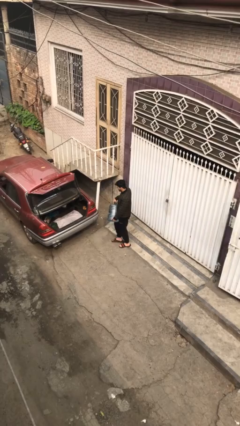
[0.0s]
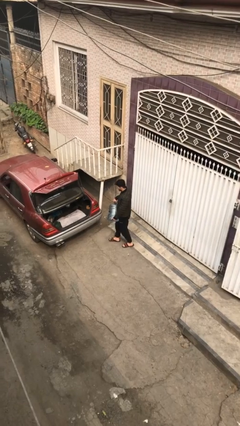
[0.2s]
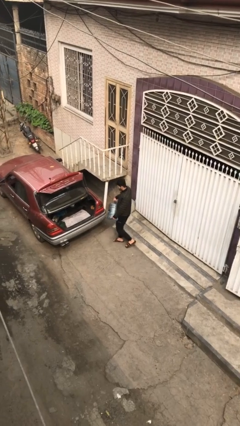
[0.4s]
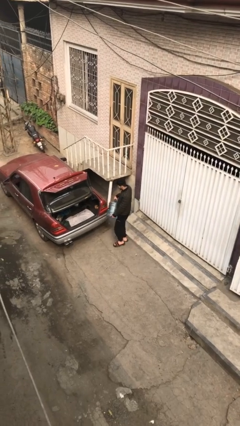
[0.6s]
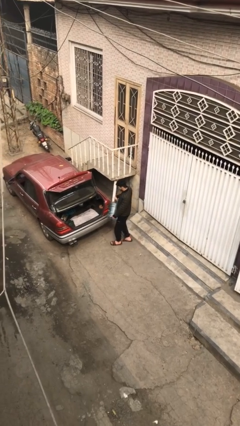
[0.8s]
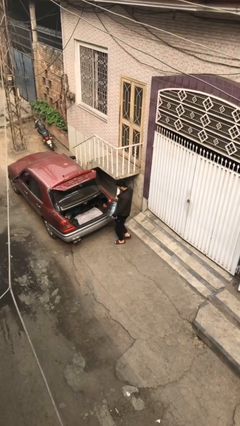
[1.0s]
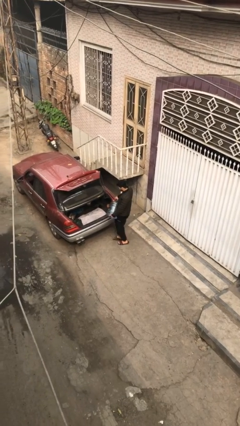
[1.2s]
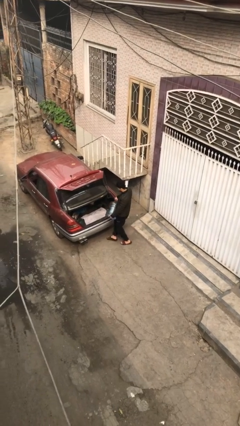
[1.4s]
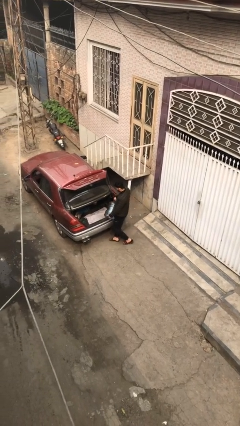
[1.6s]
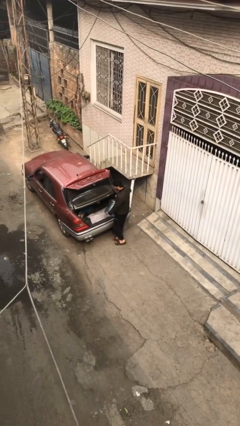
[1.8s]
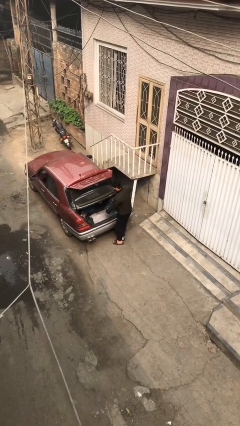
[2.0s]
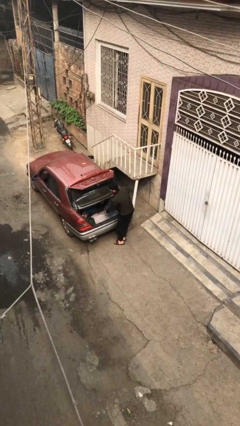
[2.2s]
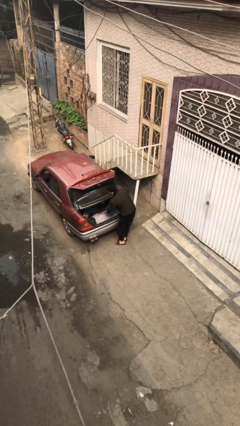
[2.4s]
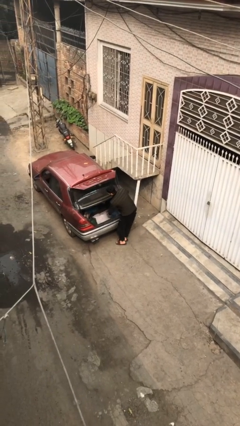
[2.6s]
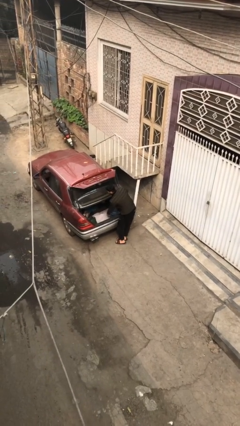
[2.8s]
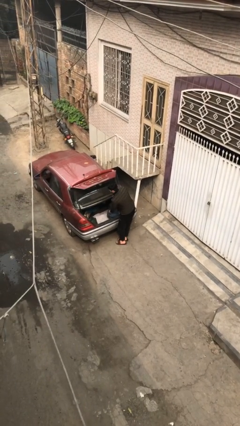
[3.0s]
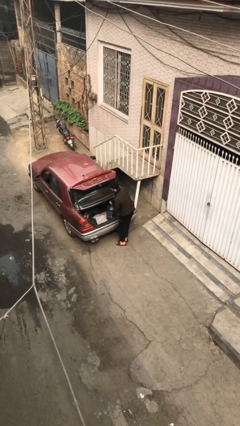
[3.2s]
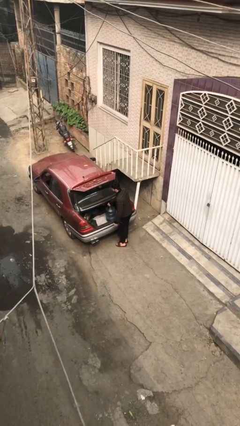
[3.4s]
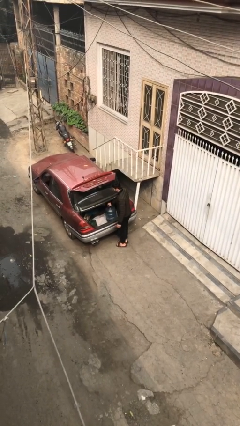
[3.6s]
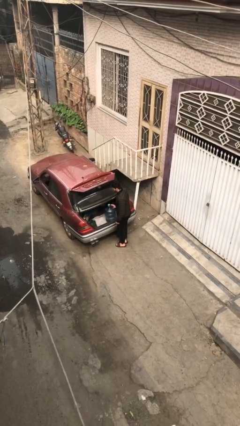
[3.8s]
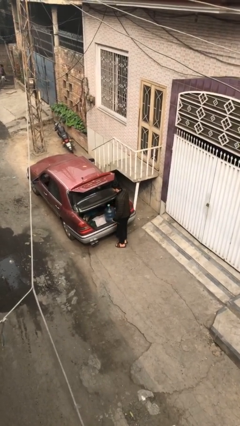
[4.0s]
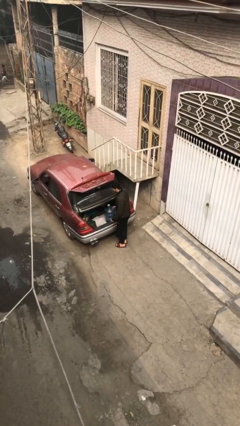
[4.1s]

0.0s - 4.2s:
person loads car

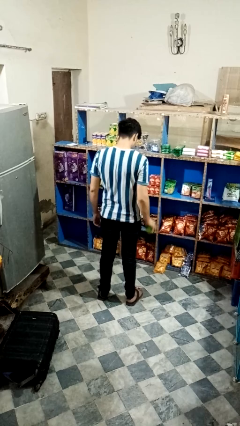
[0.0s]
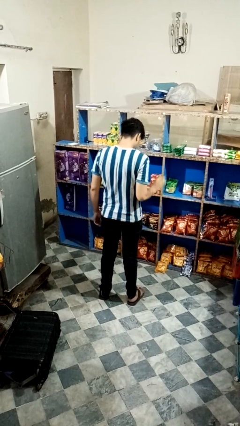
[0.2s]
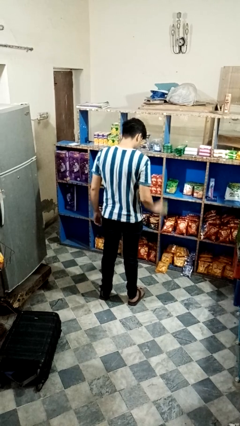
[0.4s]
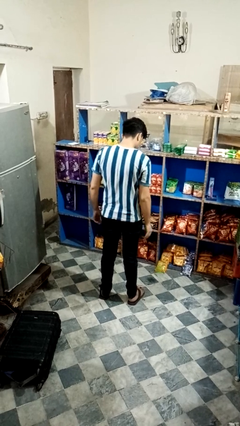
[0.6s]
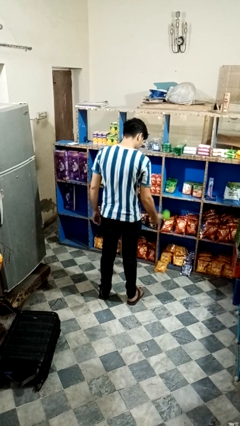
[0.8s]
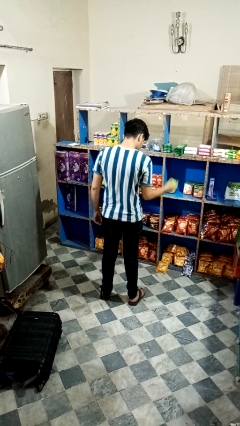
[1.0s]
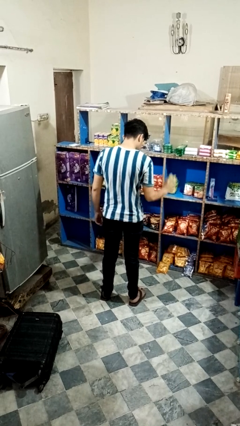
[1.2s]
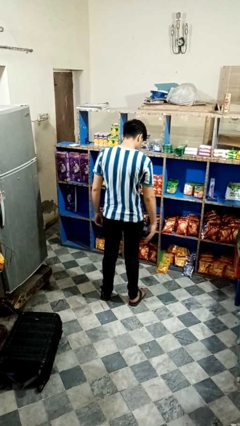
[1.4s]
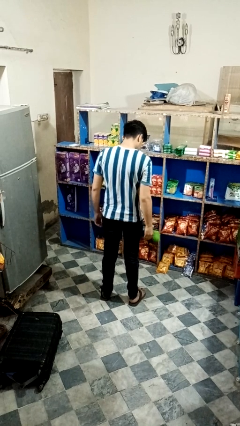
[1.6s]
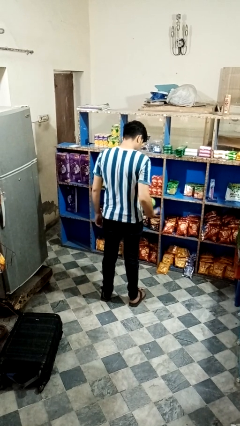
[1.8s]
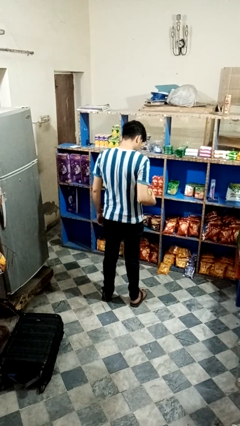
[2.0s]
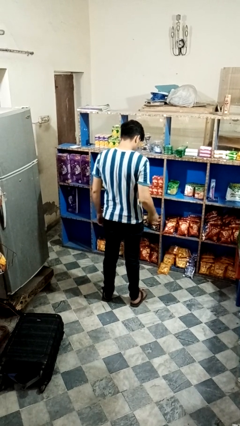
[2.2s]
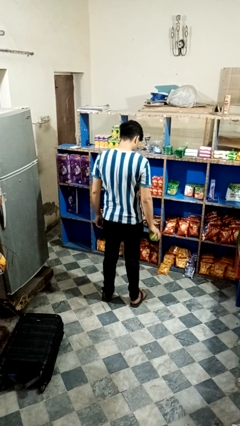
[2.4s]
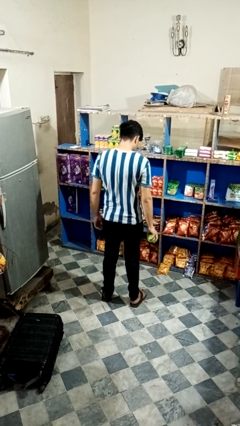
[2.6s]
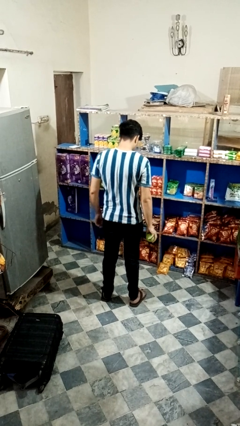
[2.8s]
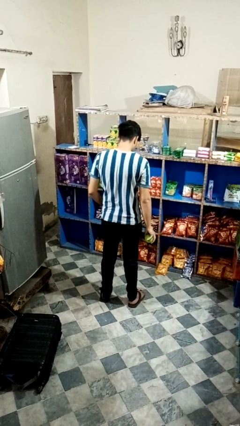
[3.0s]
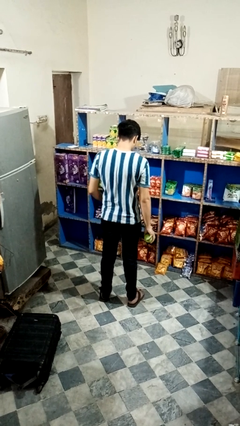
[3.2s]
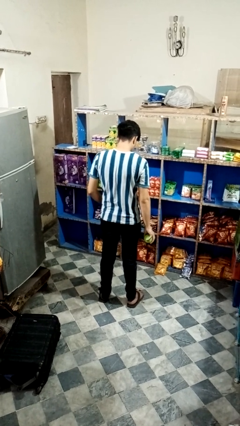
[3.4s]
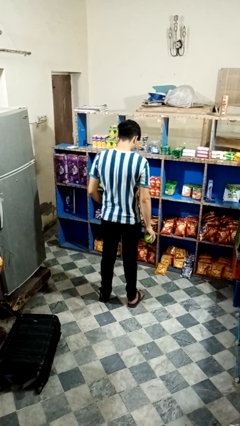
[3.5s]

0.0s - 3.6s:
person bounces ball on floor

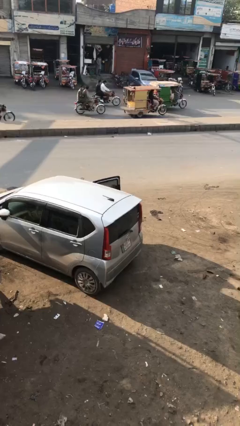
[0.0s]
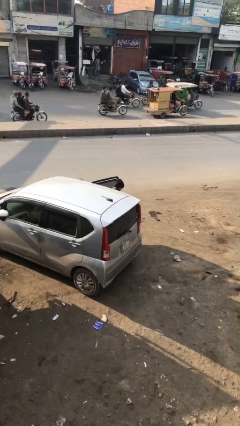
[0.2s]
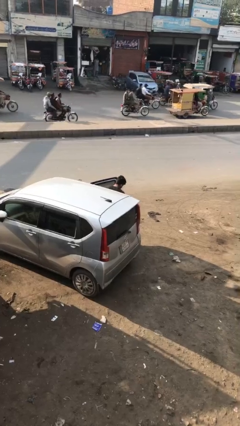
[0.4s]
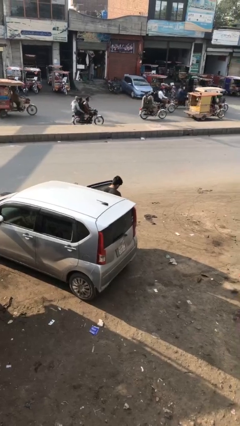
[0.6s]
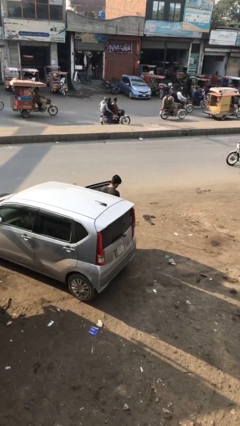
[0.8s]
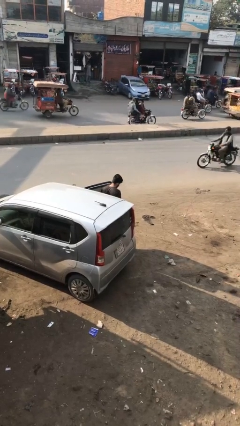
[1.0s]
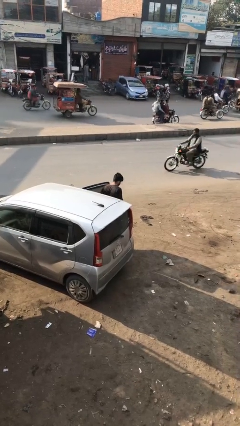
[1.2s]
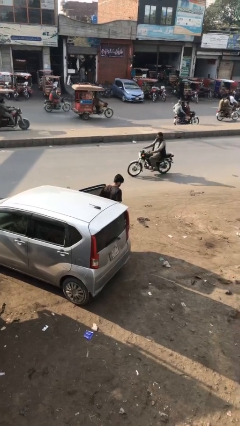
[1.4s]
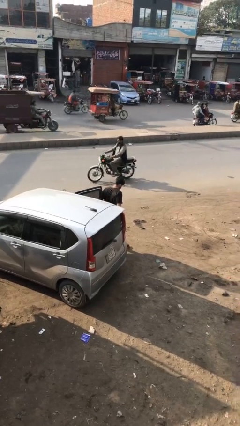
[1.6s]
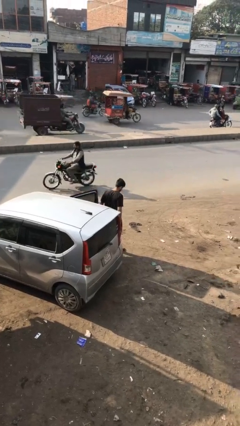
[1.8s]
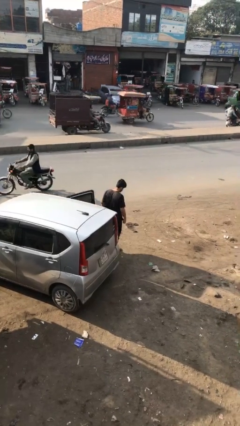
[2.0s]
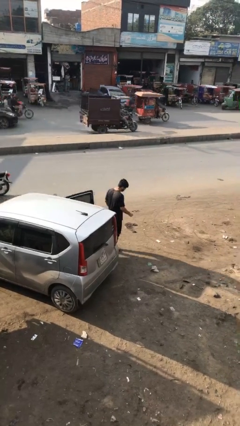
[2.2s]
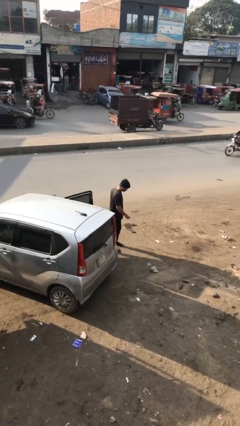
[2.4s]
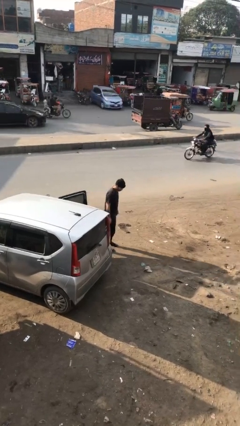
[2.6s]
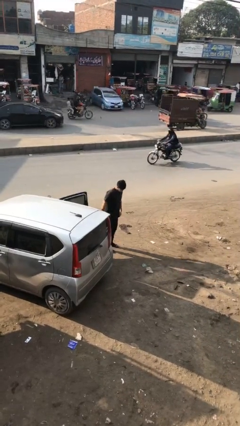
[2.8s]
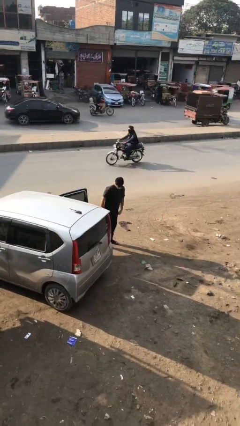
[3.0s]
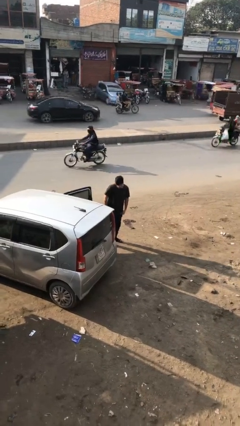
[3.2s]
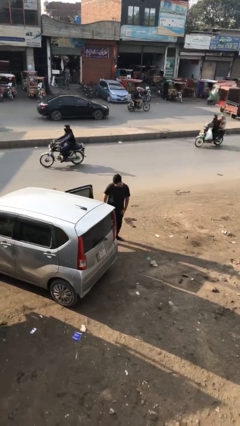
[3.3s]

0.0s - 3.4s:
person exits car

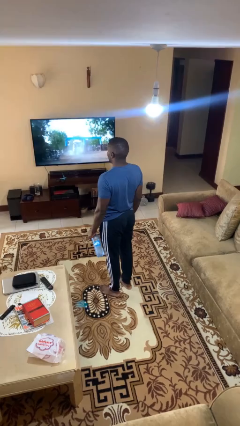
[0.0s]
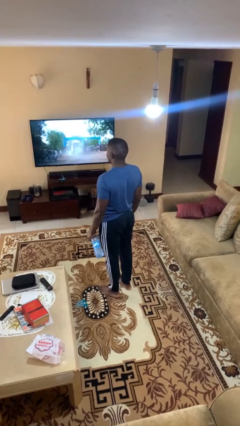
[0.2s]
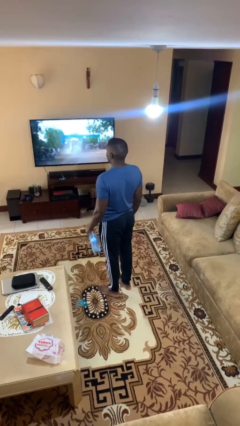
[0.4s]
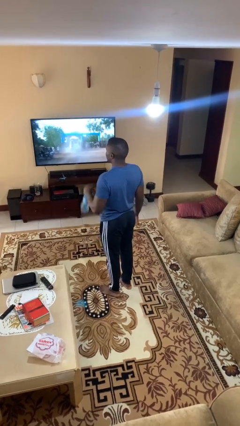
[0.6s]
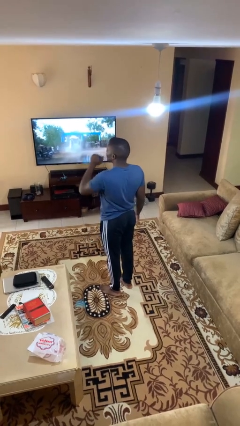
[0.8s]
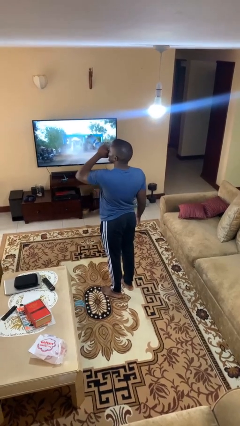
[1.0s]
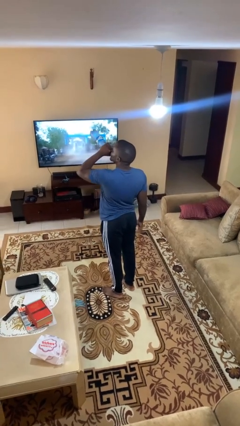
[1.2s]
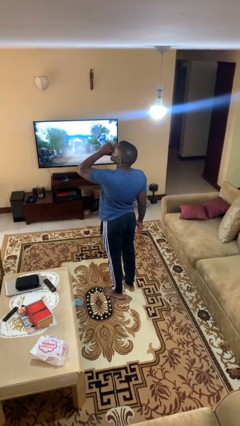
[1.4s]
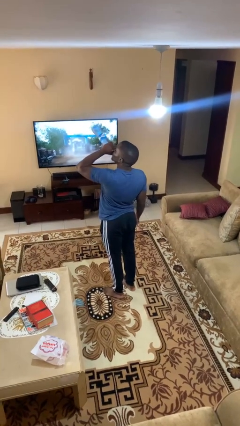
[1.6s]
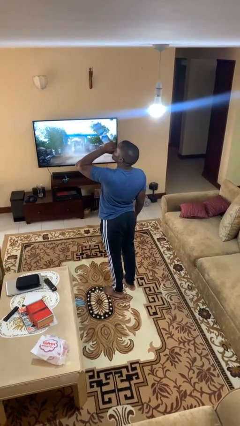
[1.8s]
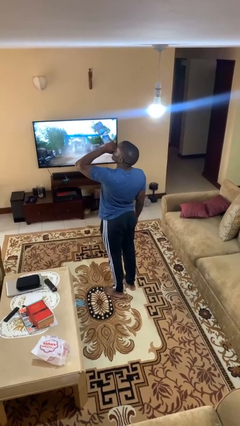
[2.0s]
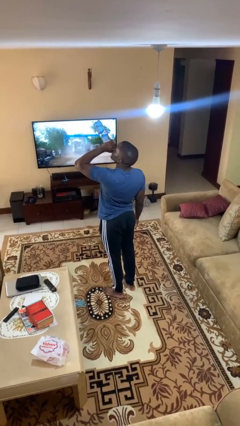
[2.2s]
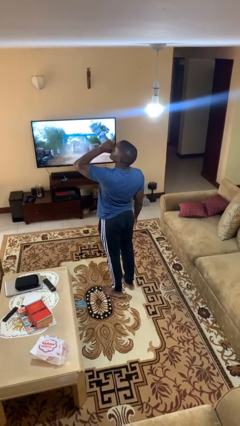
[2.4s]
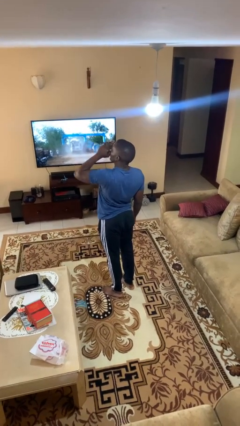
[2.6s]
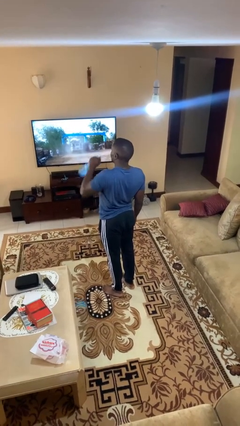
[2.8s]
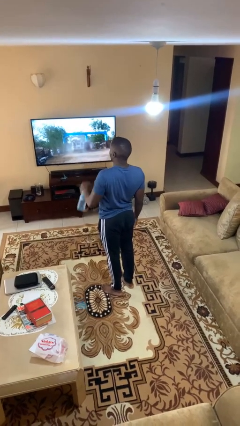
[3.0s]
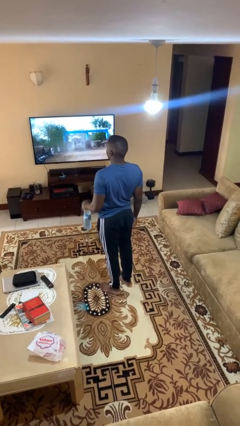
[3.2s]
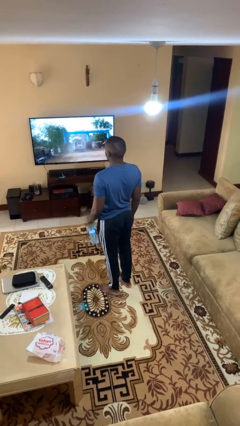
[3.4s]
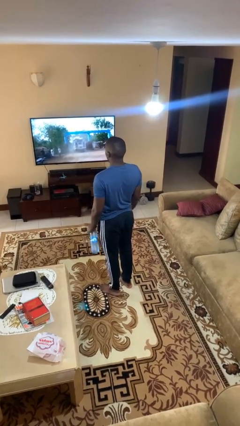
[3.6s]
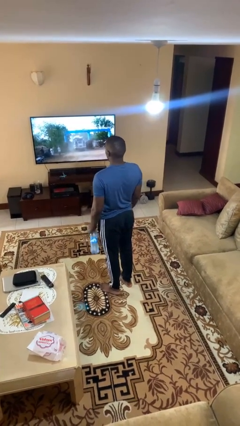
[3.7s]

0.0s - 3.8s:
person drinks from bottle

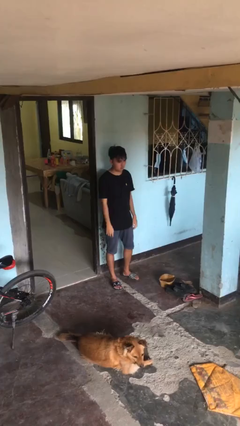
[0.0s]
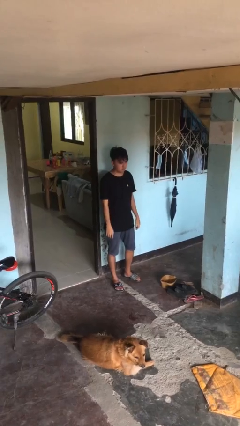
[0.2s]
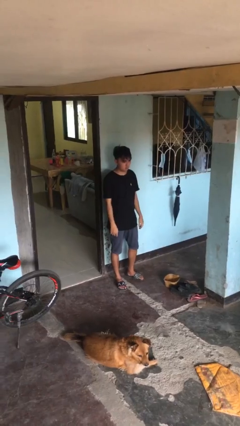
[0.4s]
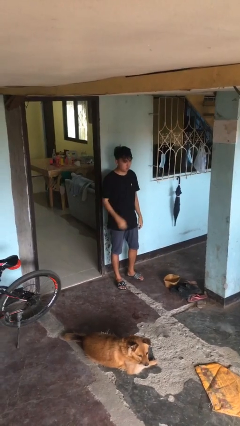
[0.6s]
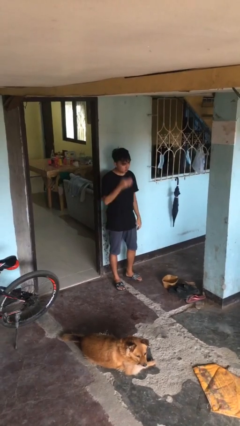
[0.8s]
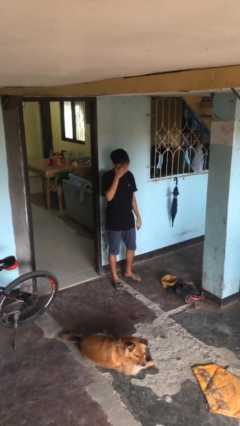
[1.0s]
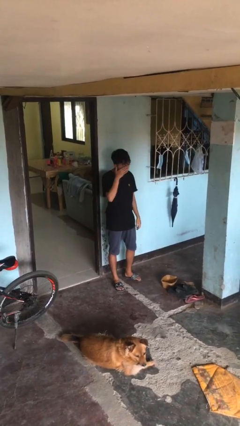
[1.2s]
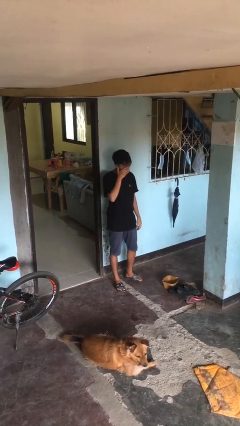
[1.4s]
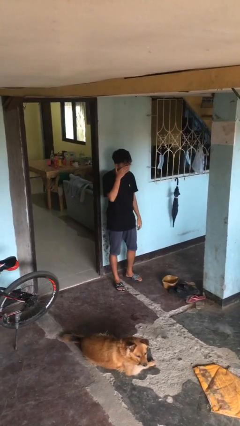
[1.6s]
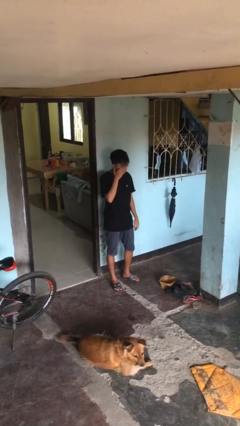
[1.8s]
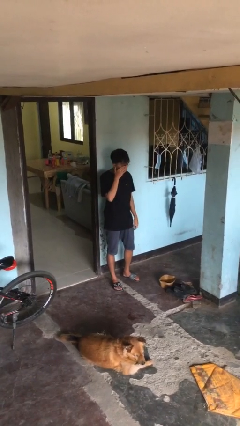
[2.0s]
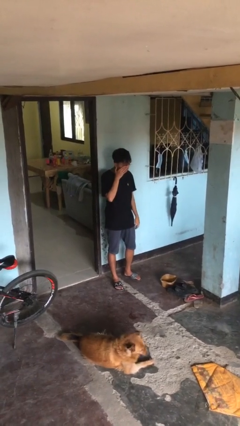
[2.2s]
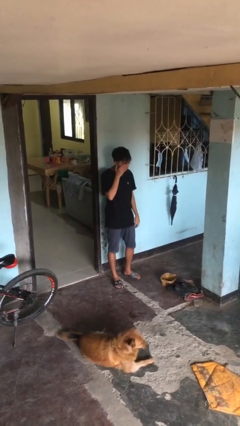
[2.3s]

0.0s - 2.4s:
person rubs eyes

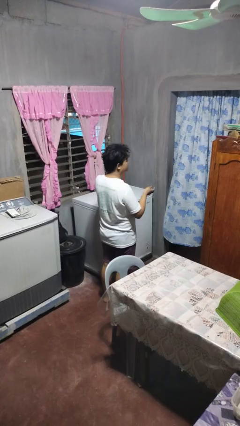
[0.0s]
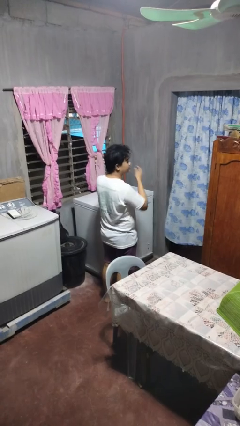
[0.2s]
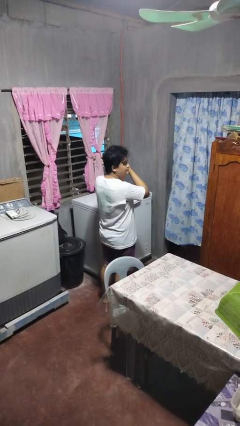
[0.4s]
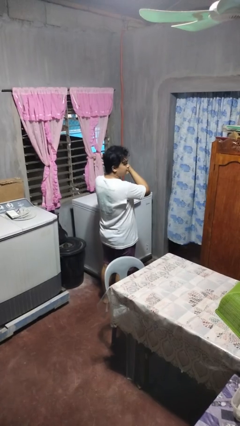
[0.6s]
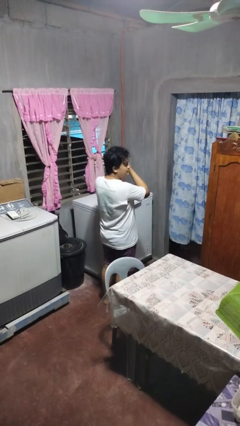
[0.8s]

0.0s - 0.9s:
person takes off earrings
